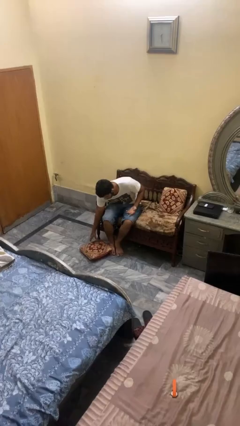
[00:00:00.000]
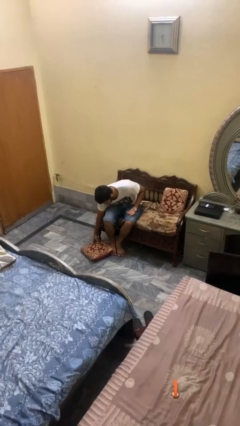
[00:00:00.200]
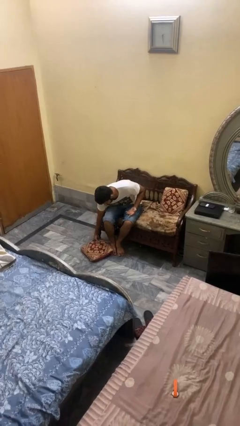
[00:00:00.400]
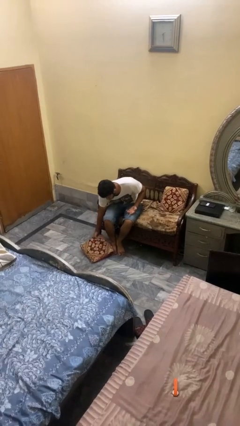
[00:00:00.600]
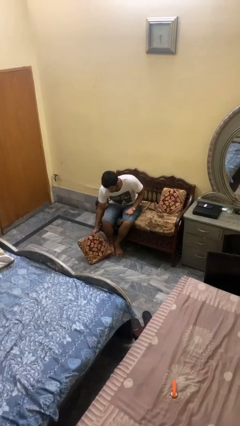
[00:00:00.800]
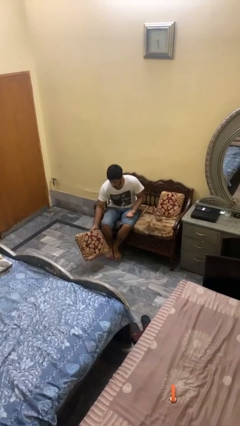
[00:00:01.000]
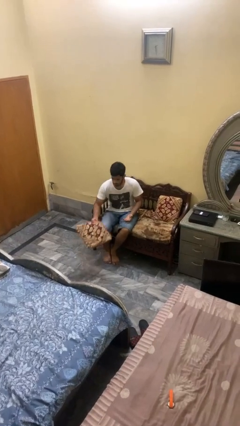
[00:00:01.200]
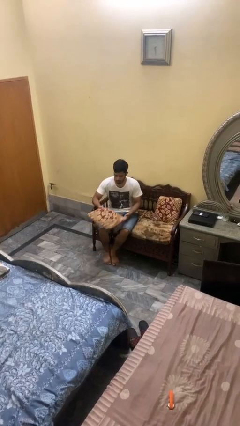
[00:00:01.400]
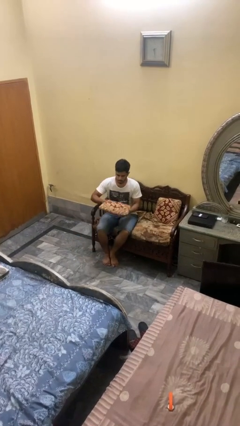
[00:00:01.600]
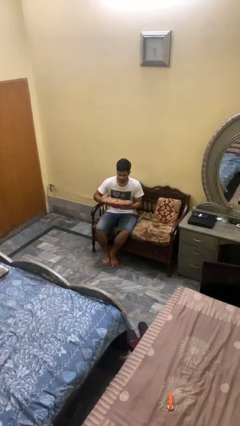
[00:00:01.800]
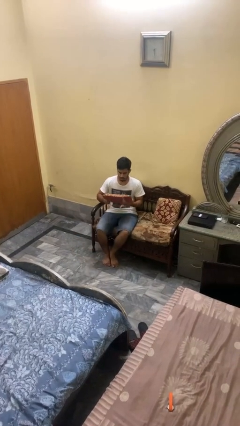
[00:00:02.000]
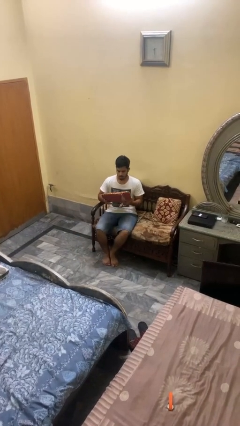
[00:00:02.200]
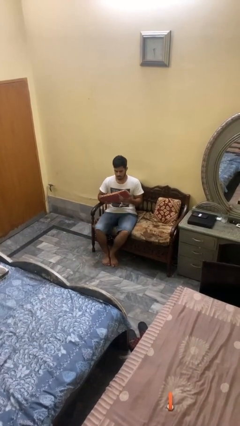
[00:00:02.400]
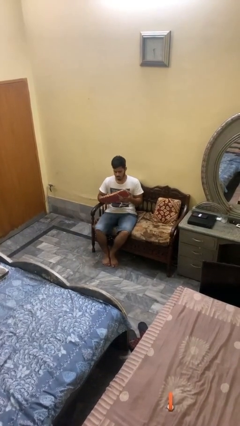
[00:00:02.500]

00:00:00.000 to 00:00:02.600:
person picks up object from floor

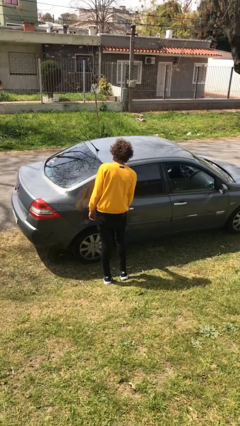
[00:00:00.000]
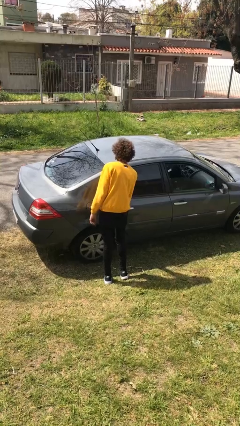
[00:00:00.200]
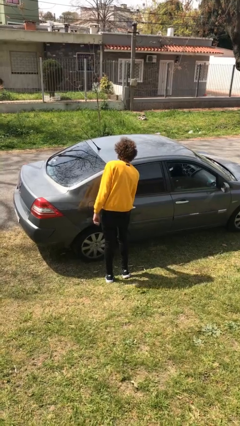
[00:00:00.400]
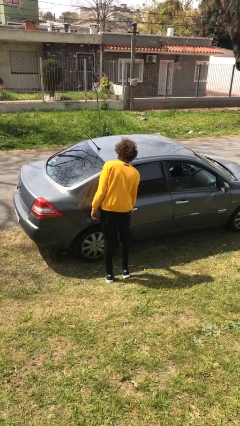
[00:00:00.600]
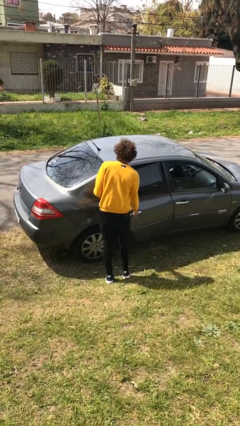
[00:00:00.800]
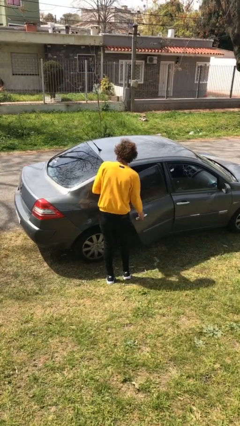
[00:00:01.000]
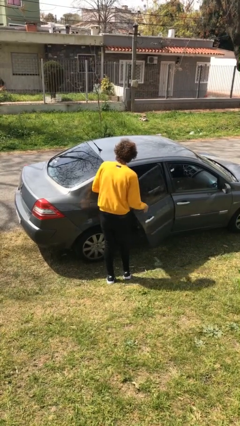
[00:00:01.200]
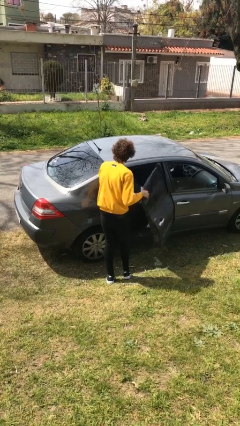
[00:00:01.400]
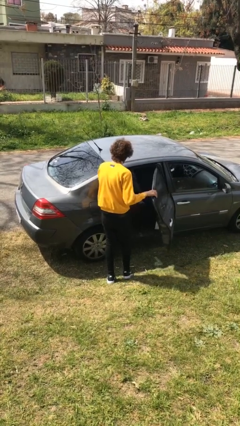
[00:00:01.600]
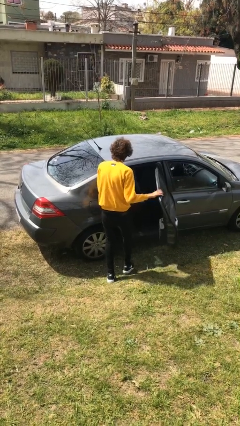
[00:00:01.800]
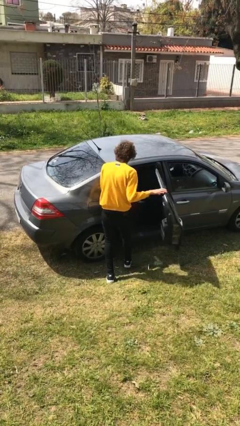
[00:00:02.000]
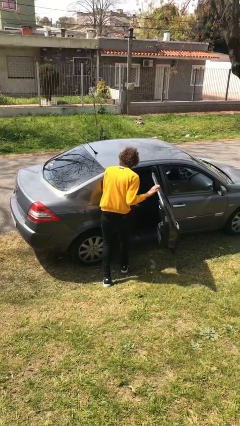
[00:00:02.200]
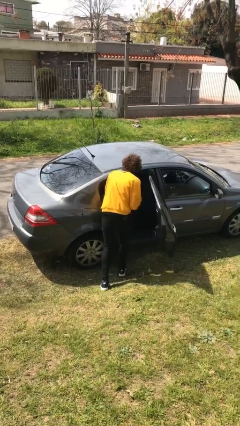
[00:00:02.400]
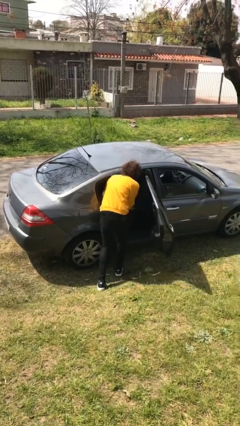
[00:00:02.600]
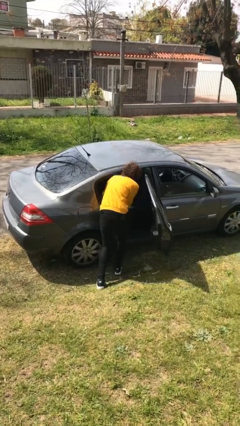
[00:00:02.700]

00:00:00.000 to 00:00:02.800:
person opens car door

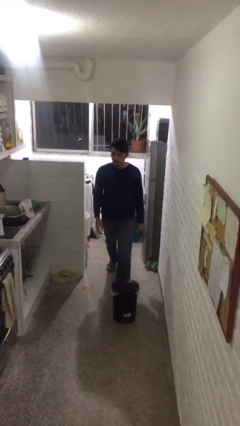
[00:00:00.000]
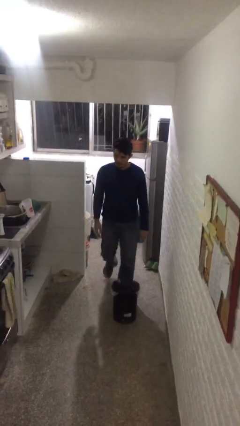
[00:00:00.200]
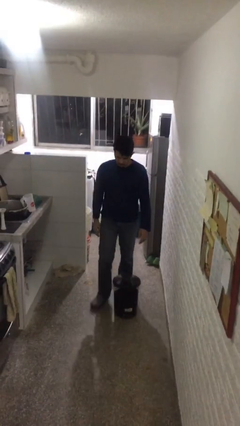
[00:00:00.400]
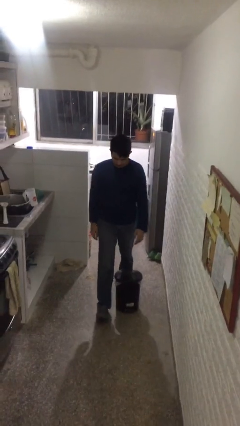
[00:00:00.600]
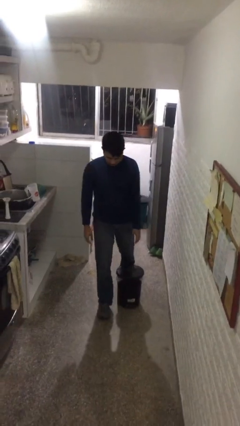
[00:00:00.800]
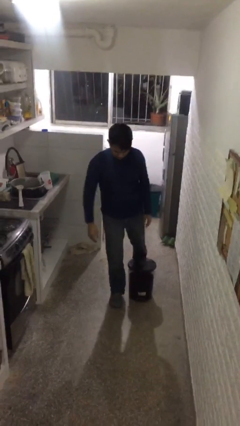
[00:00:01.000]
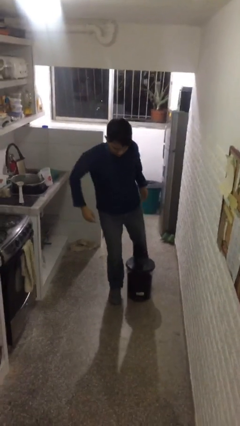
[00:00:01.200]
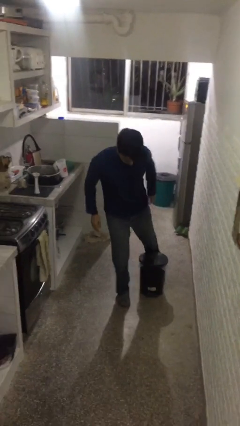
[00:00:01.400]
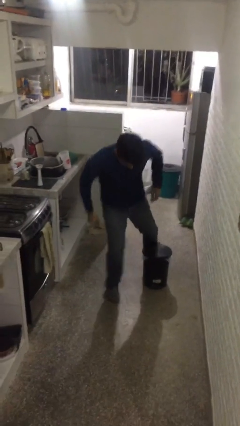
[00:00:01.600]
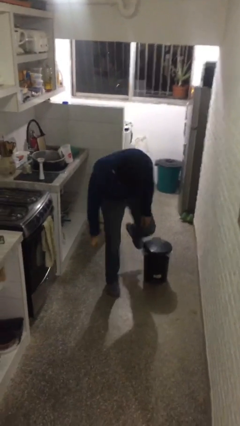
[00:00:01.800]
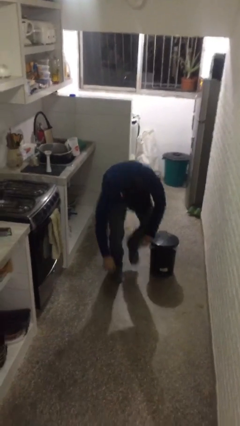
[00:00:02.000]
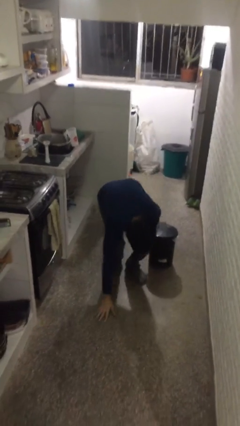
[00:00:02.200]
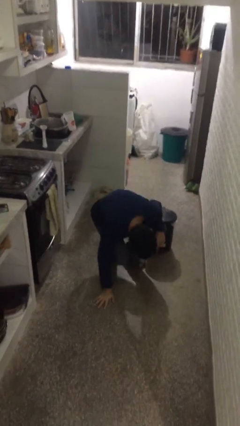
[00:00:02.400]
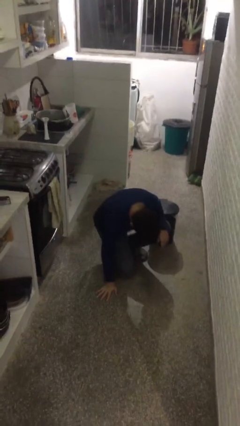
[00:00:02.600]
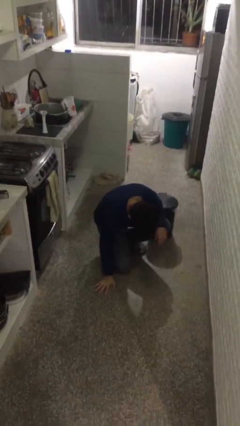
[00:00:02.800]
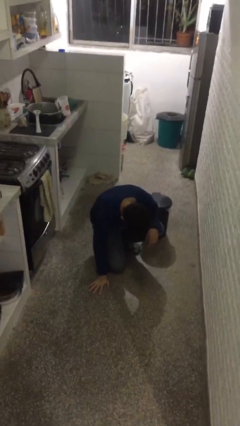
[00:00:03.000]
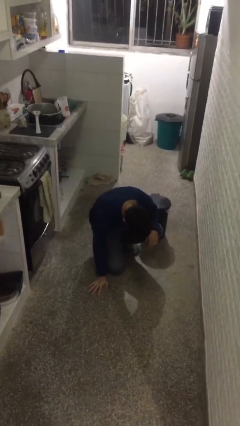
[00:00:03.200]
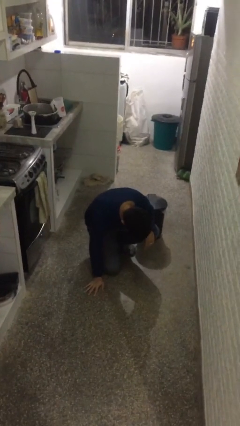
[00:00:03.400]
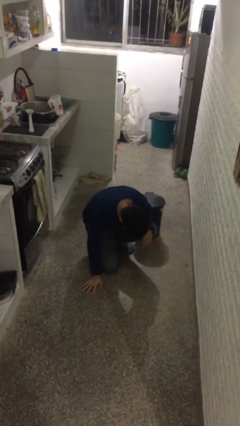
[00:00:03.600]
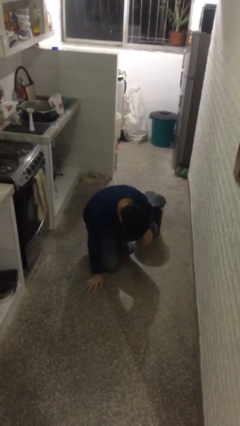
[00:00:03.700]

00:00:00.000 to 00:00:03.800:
person trips on object on floor

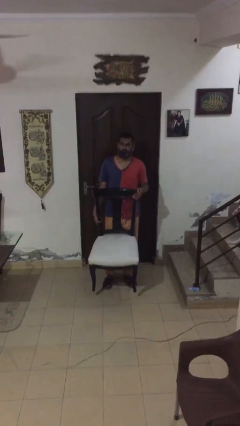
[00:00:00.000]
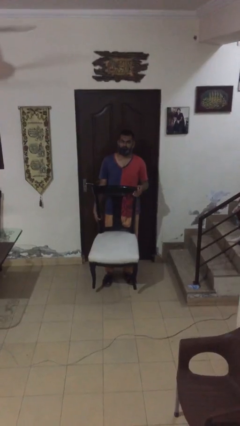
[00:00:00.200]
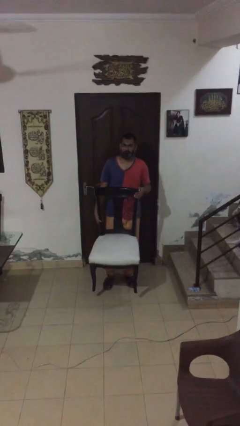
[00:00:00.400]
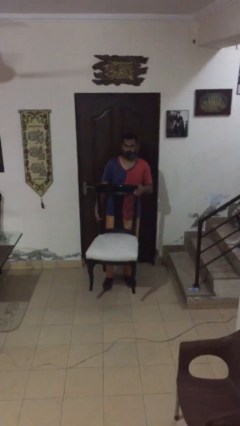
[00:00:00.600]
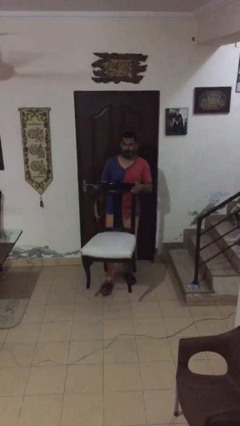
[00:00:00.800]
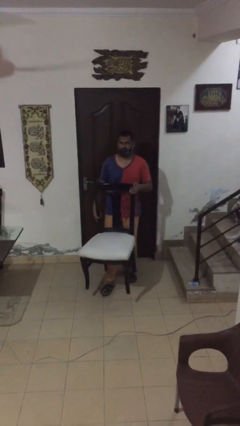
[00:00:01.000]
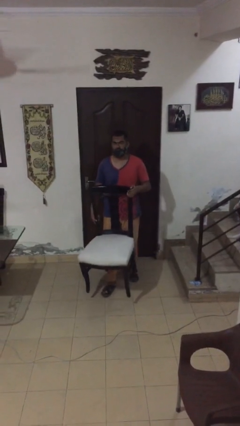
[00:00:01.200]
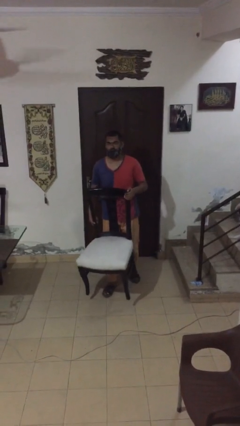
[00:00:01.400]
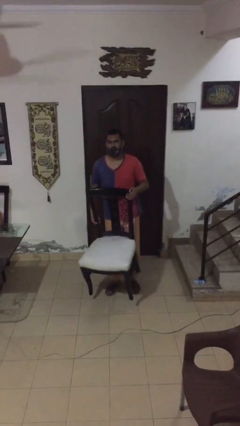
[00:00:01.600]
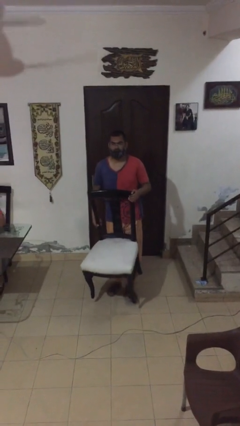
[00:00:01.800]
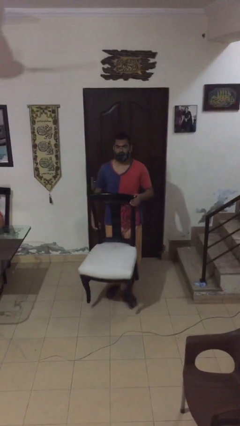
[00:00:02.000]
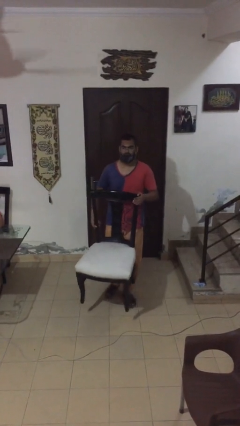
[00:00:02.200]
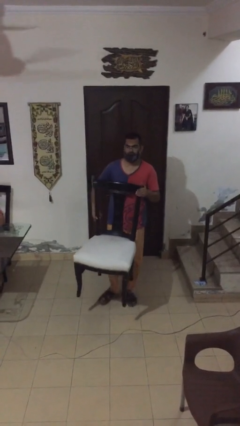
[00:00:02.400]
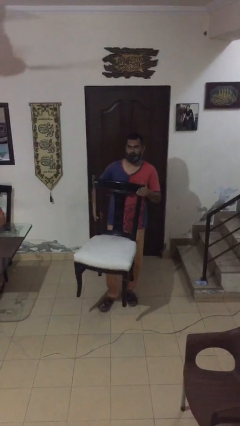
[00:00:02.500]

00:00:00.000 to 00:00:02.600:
person carries heavy object

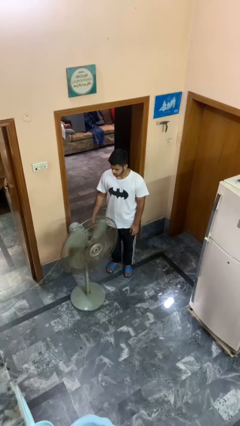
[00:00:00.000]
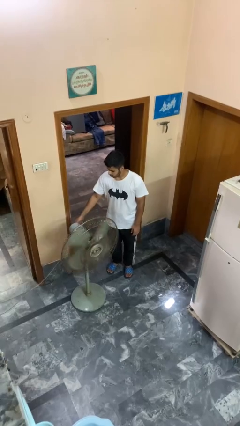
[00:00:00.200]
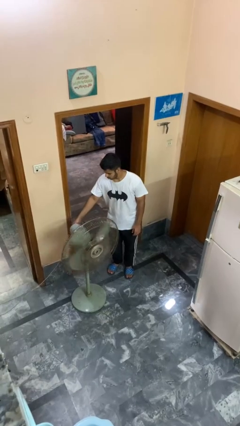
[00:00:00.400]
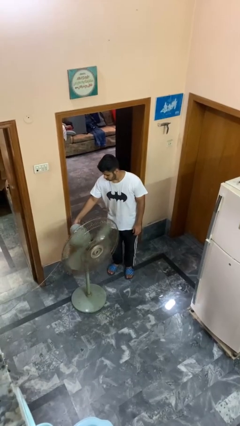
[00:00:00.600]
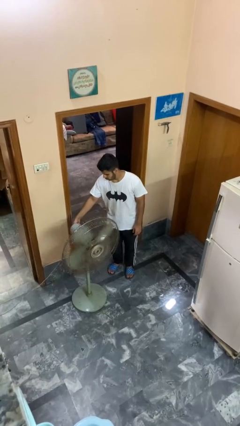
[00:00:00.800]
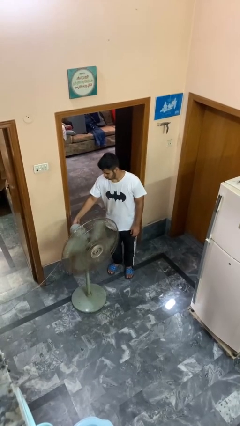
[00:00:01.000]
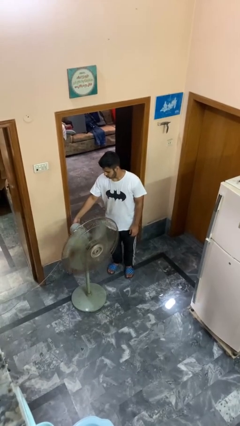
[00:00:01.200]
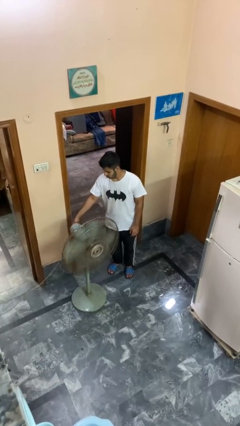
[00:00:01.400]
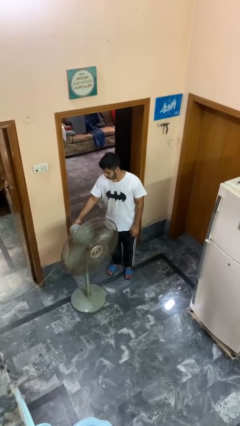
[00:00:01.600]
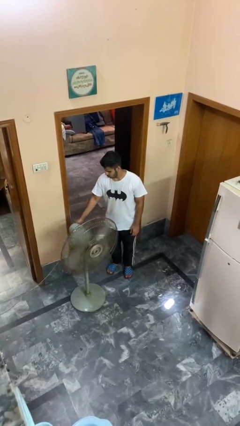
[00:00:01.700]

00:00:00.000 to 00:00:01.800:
person turns on fan

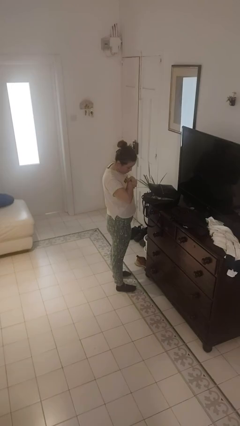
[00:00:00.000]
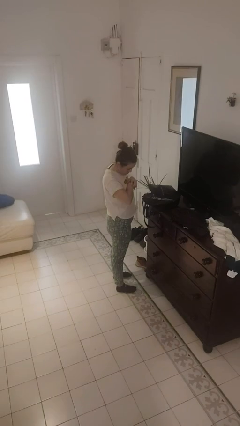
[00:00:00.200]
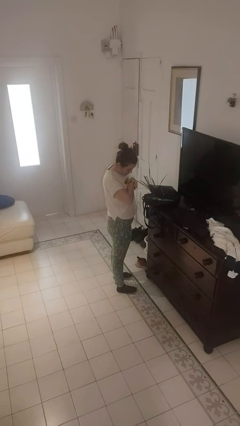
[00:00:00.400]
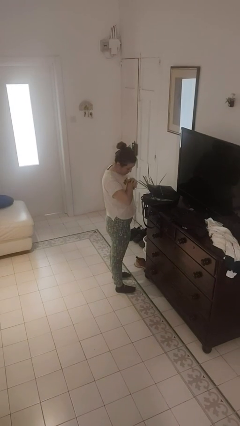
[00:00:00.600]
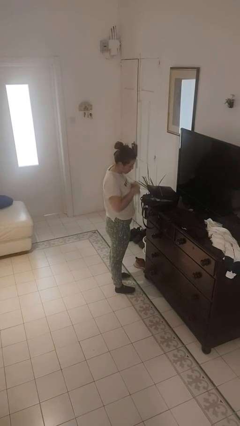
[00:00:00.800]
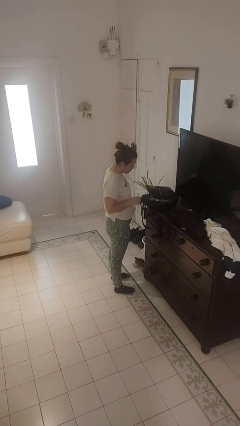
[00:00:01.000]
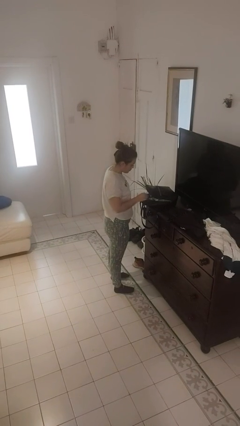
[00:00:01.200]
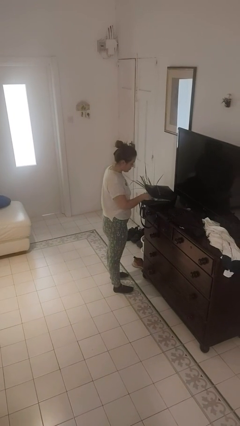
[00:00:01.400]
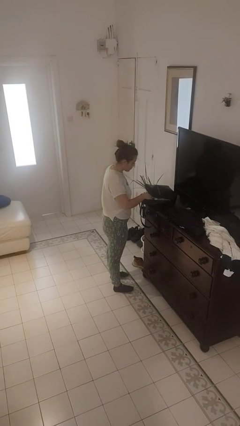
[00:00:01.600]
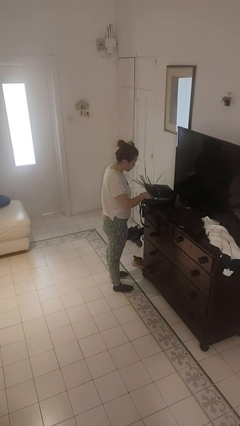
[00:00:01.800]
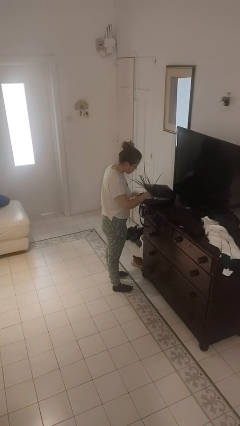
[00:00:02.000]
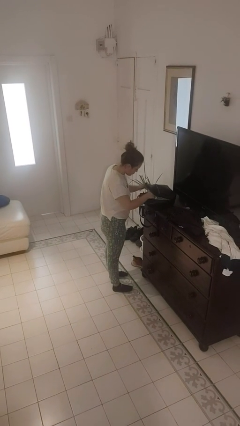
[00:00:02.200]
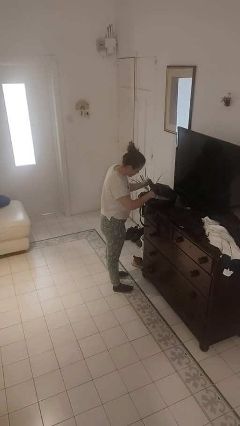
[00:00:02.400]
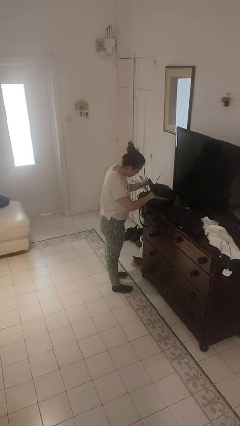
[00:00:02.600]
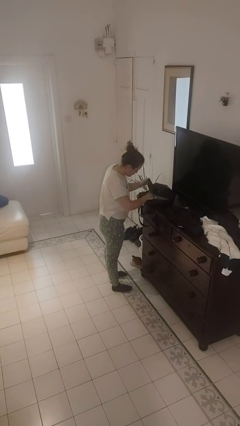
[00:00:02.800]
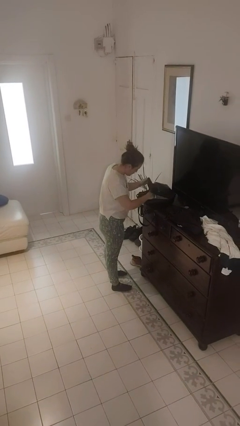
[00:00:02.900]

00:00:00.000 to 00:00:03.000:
person searches in purse

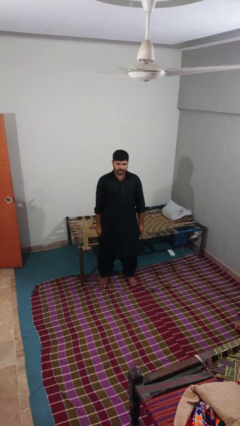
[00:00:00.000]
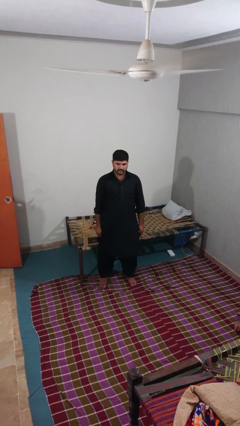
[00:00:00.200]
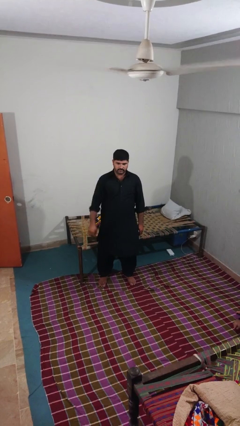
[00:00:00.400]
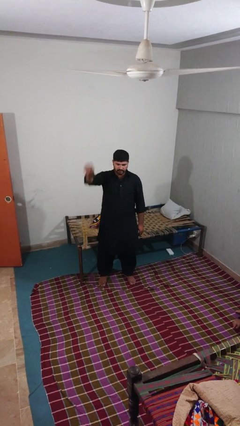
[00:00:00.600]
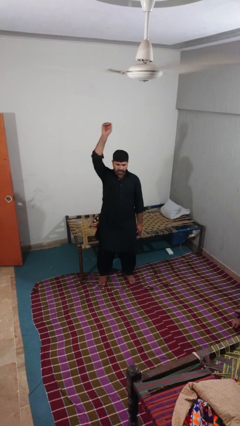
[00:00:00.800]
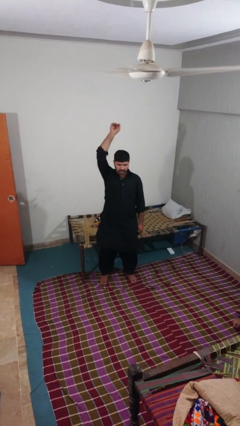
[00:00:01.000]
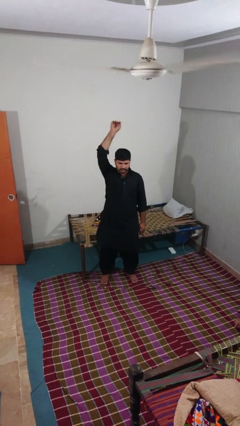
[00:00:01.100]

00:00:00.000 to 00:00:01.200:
person gestures raise hand
